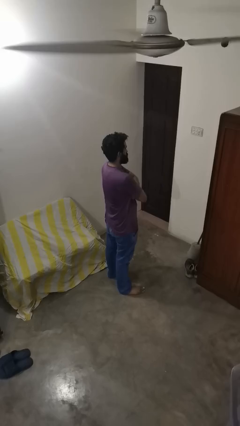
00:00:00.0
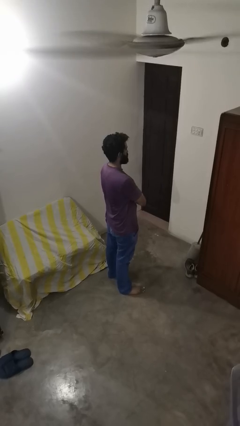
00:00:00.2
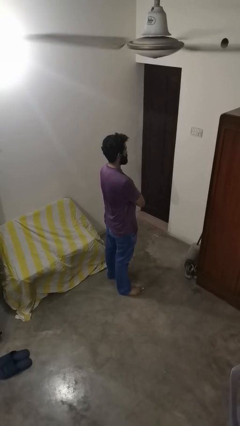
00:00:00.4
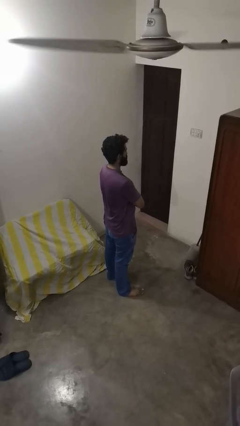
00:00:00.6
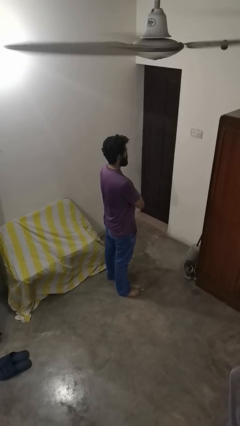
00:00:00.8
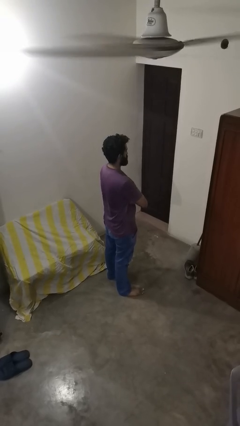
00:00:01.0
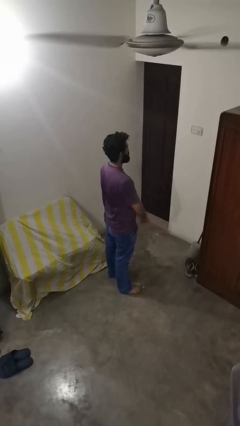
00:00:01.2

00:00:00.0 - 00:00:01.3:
person crosses arms

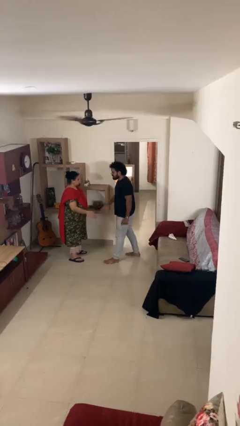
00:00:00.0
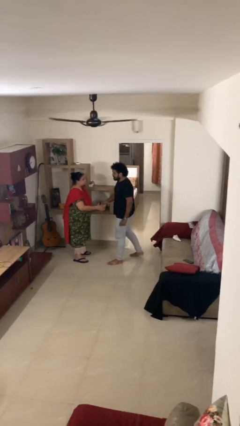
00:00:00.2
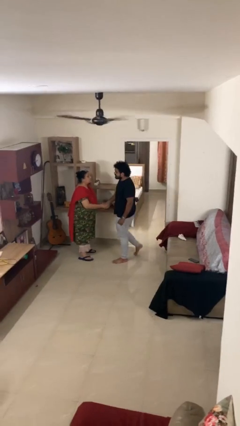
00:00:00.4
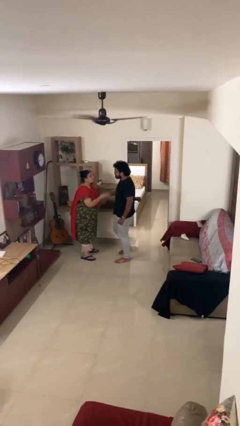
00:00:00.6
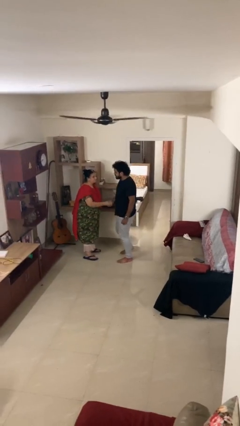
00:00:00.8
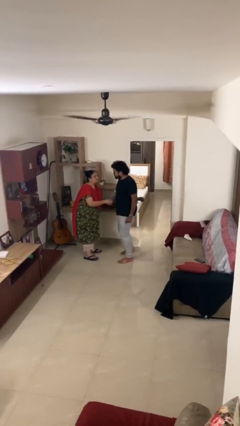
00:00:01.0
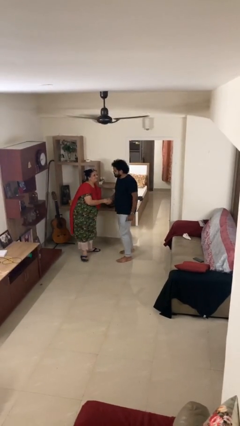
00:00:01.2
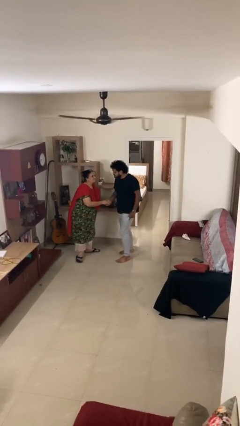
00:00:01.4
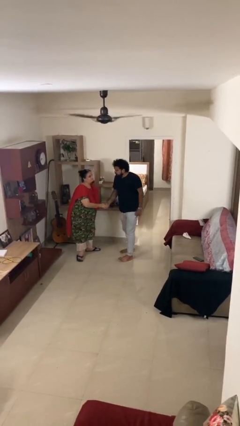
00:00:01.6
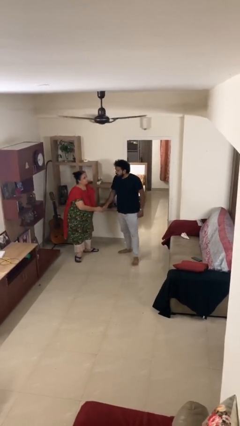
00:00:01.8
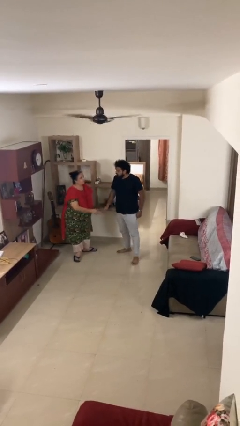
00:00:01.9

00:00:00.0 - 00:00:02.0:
person shakes hand

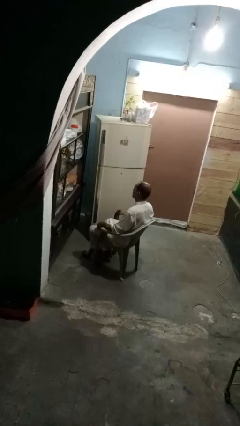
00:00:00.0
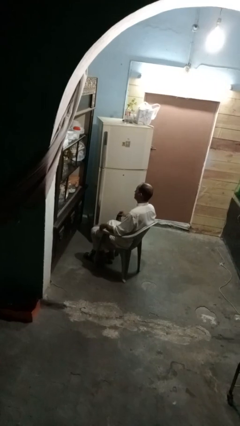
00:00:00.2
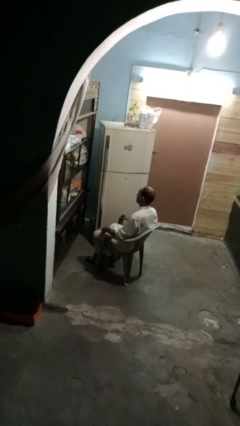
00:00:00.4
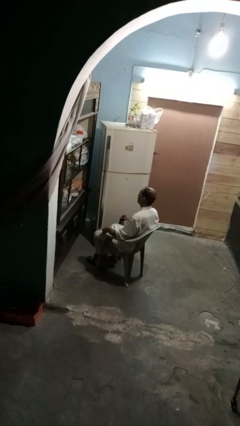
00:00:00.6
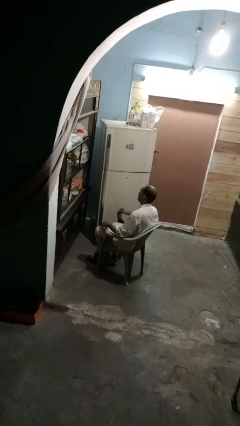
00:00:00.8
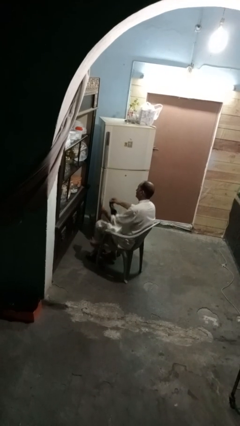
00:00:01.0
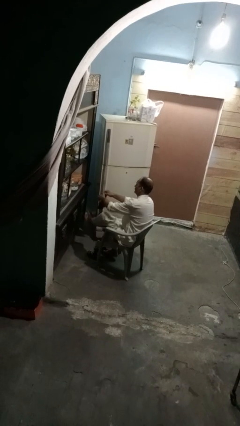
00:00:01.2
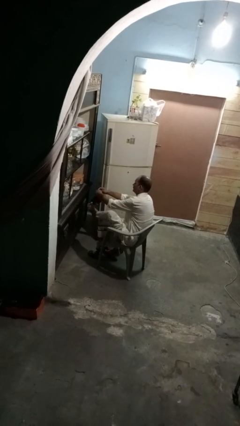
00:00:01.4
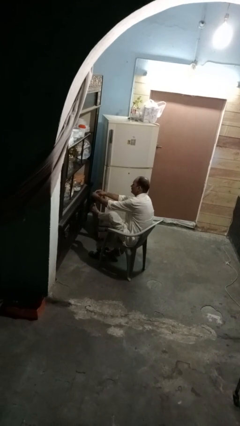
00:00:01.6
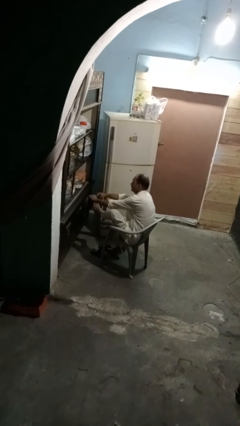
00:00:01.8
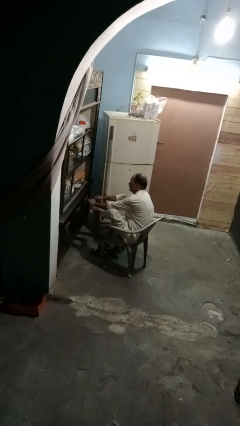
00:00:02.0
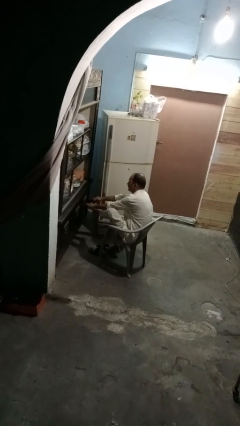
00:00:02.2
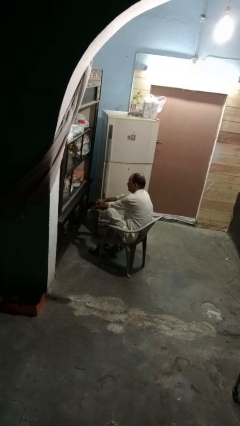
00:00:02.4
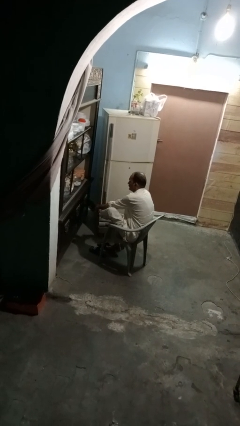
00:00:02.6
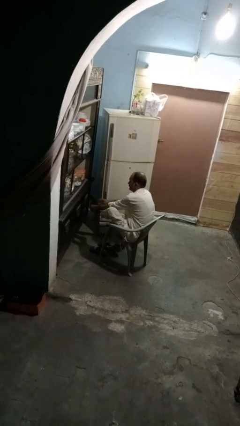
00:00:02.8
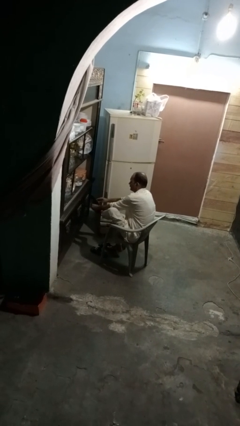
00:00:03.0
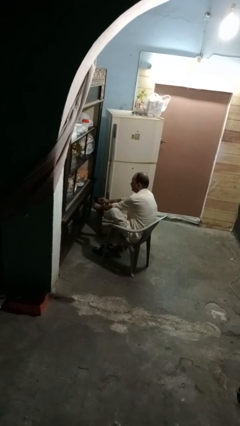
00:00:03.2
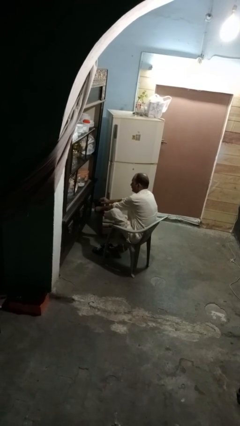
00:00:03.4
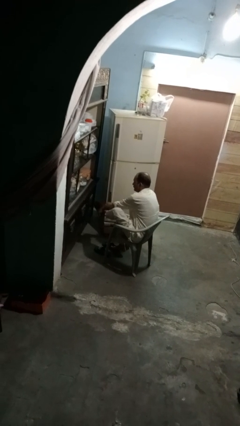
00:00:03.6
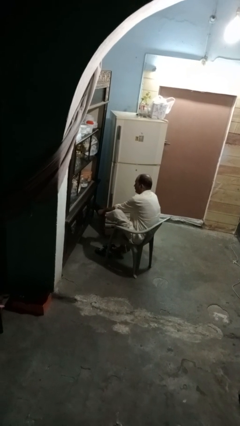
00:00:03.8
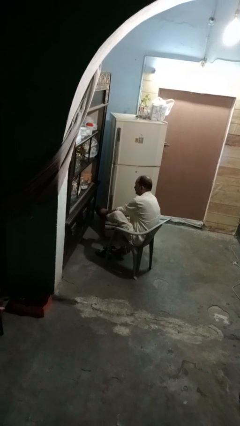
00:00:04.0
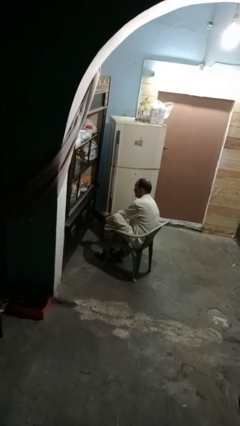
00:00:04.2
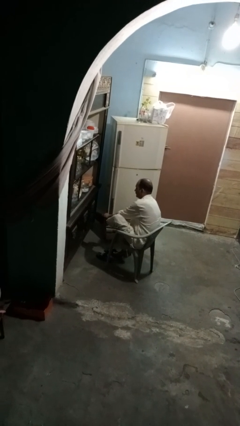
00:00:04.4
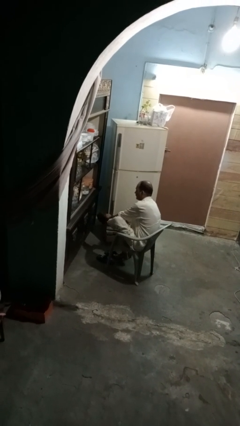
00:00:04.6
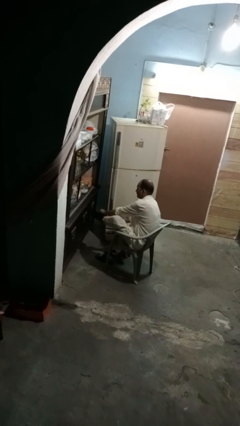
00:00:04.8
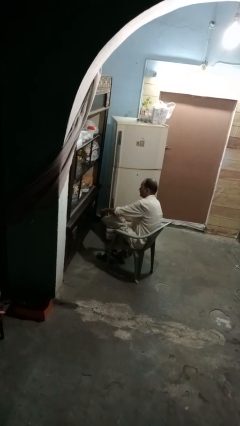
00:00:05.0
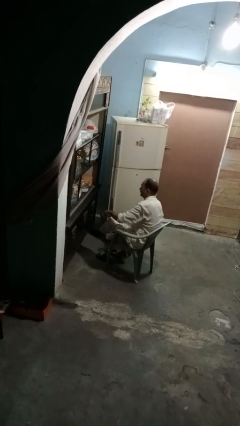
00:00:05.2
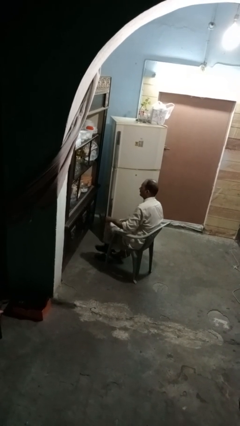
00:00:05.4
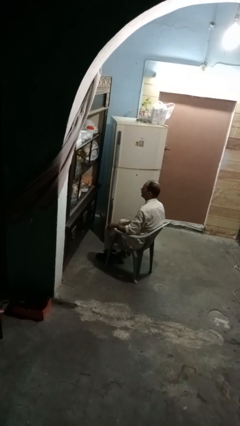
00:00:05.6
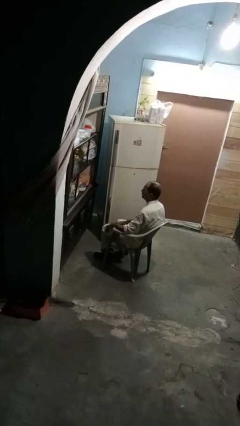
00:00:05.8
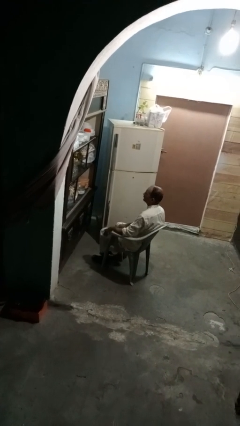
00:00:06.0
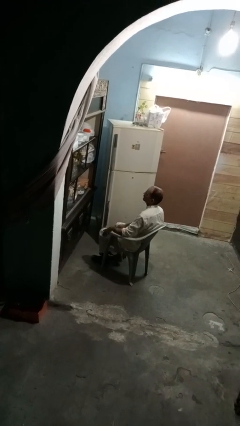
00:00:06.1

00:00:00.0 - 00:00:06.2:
person puts on socks

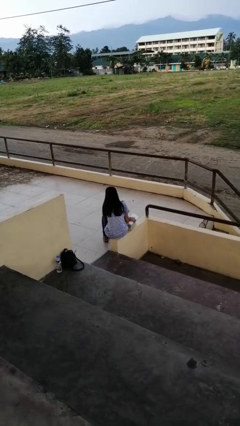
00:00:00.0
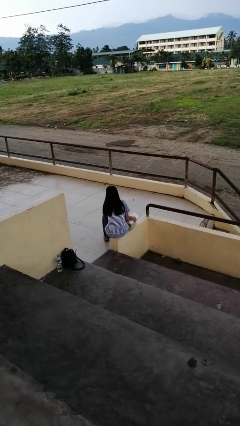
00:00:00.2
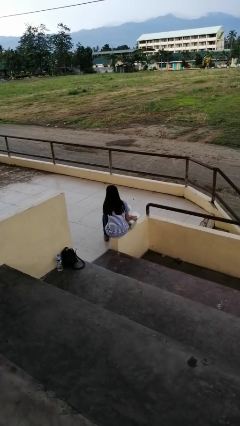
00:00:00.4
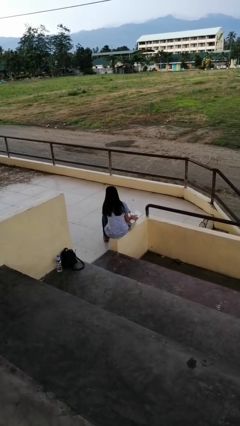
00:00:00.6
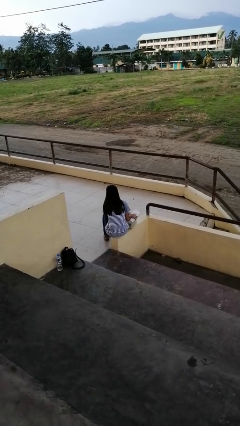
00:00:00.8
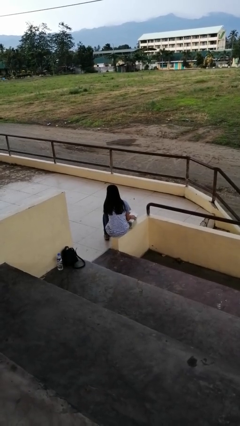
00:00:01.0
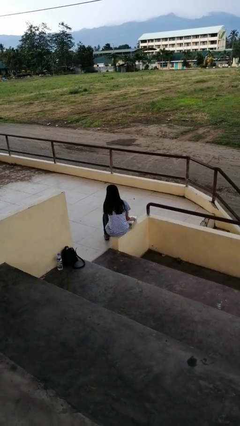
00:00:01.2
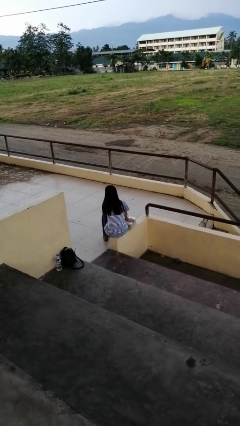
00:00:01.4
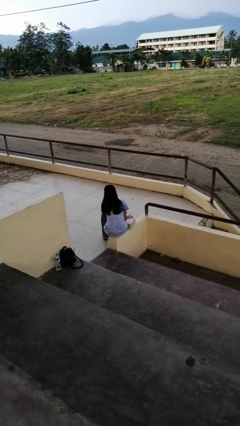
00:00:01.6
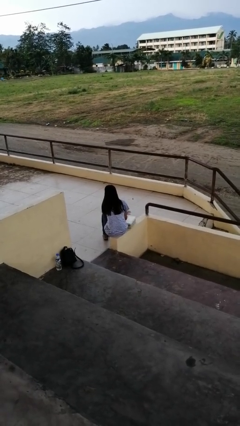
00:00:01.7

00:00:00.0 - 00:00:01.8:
person puts object into box

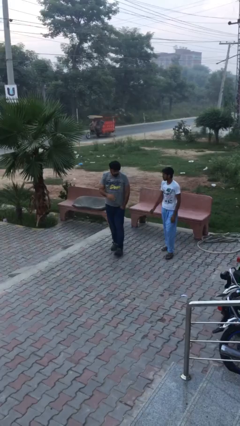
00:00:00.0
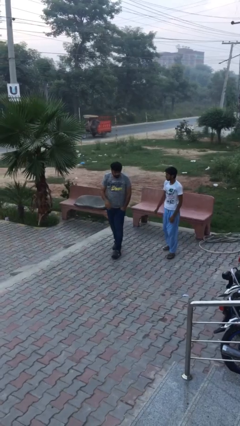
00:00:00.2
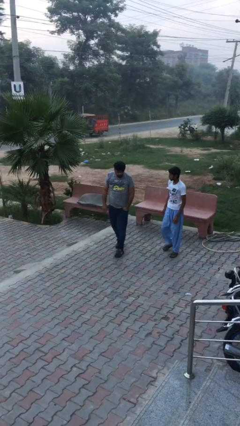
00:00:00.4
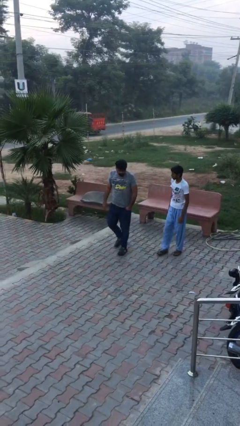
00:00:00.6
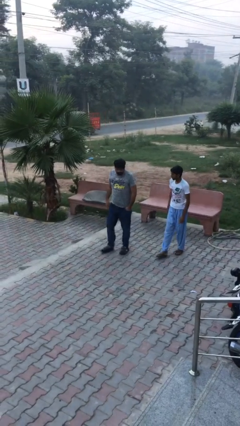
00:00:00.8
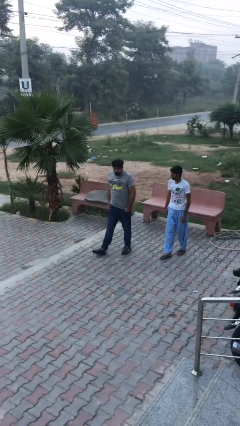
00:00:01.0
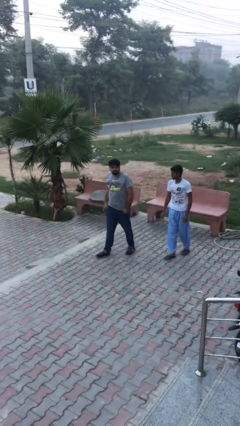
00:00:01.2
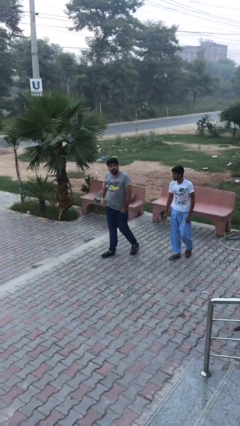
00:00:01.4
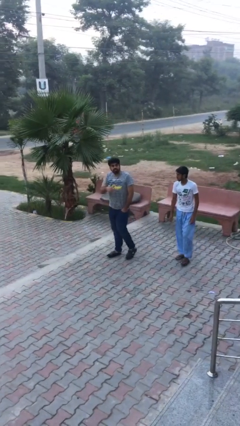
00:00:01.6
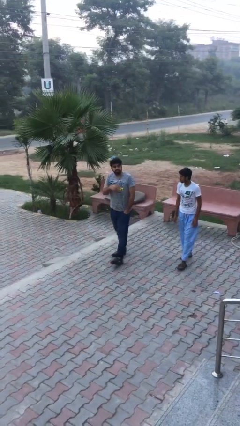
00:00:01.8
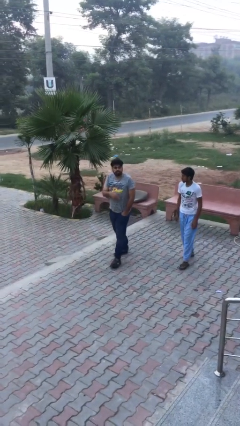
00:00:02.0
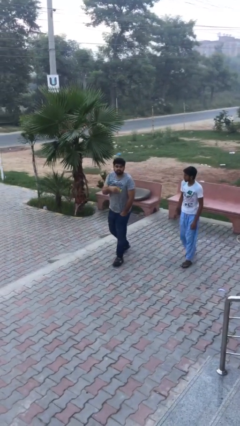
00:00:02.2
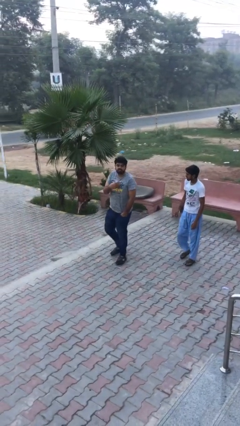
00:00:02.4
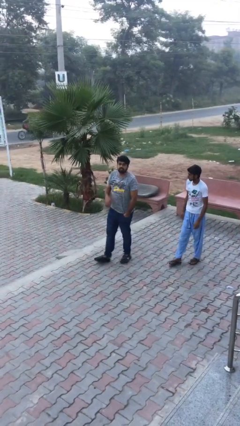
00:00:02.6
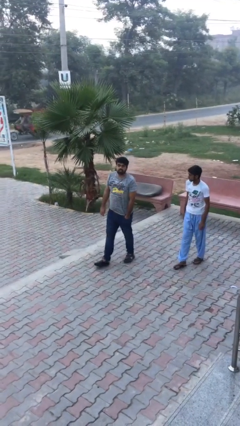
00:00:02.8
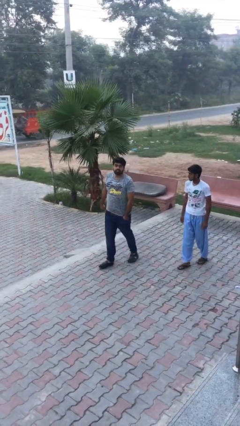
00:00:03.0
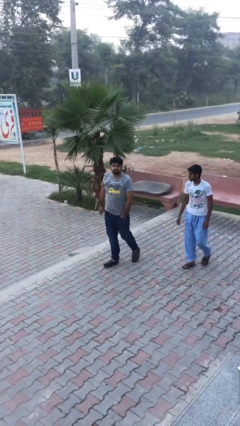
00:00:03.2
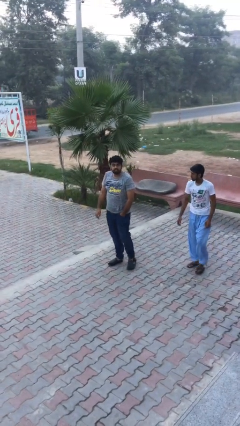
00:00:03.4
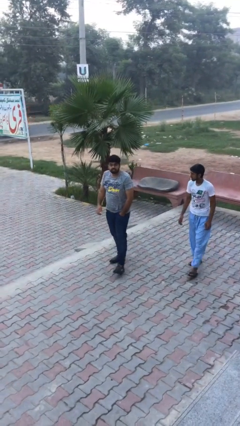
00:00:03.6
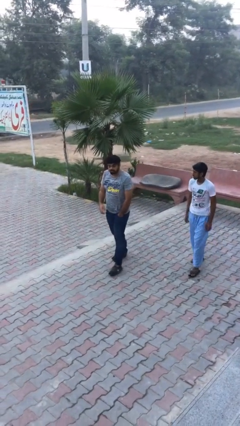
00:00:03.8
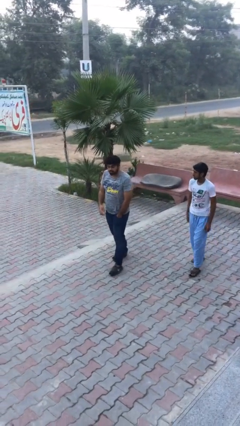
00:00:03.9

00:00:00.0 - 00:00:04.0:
person talks to person

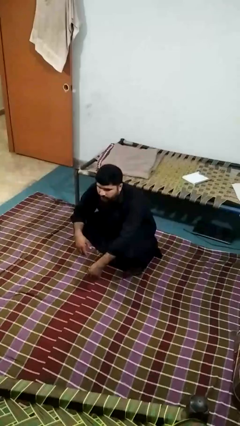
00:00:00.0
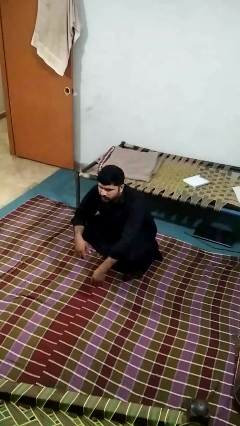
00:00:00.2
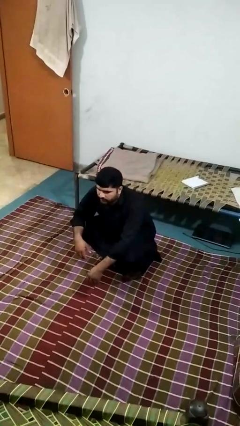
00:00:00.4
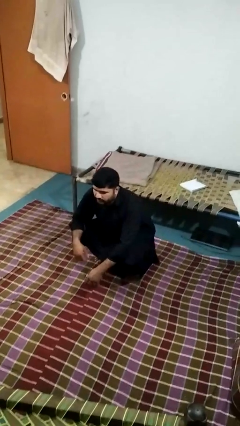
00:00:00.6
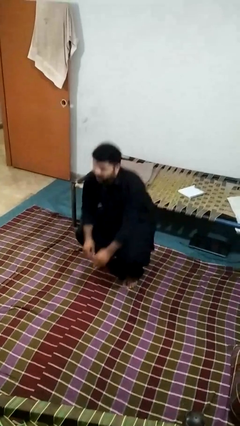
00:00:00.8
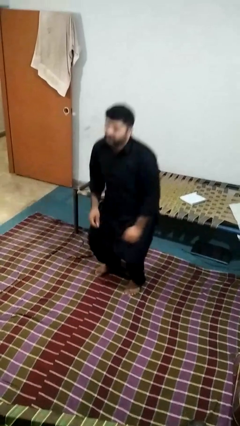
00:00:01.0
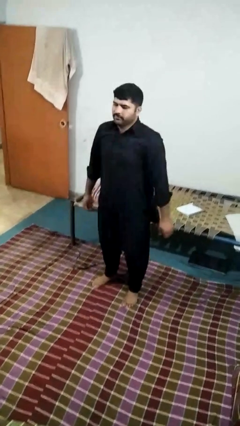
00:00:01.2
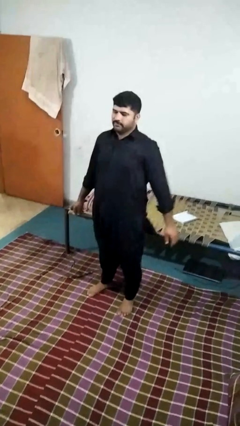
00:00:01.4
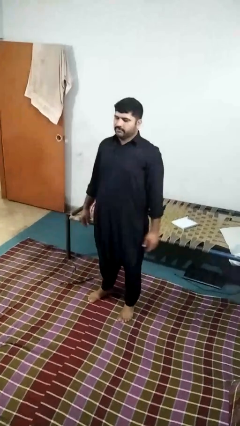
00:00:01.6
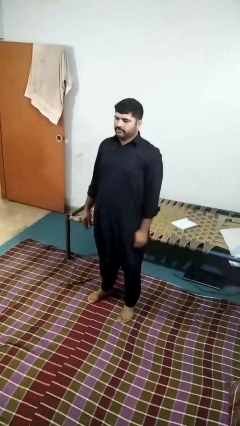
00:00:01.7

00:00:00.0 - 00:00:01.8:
person stands up
